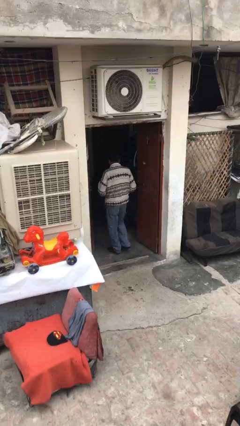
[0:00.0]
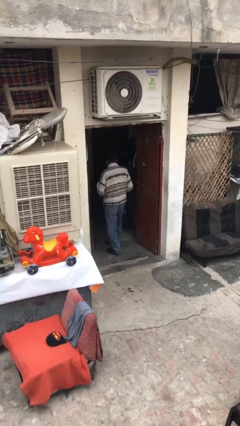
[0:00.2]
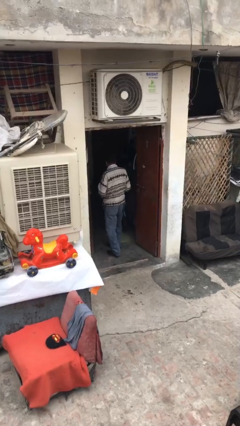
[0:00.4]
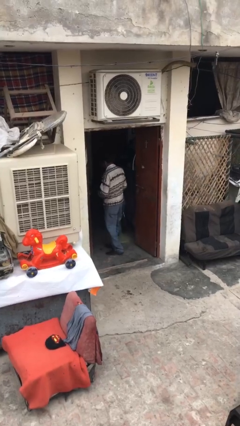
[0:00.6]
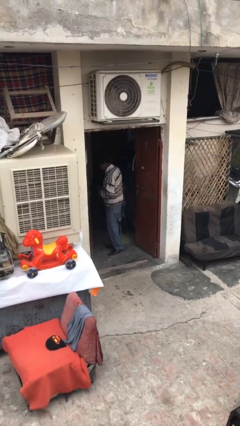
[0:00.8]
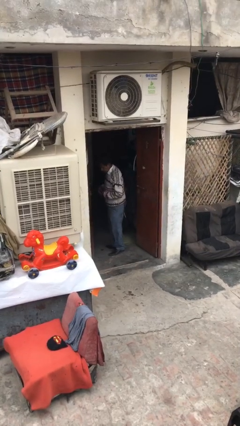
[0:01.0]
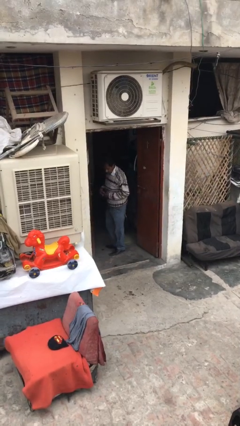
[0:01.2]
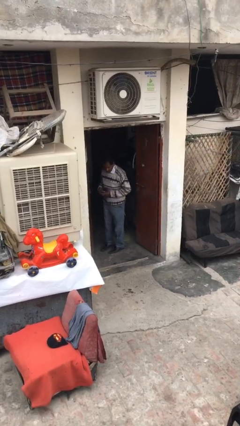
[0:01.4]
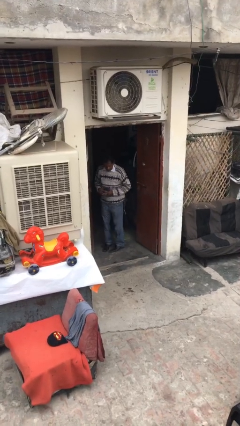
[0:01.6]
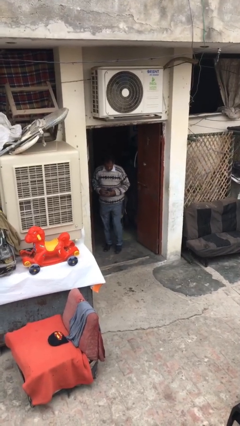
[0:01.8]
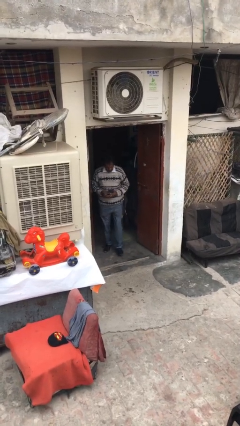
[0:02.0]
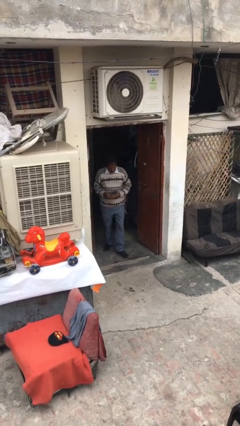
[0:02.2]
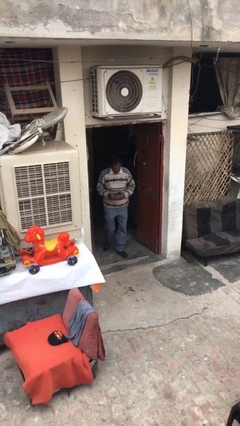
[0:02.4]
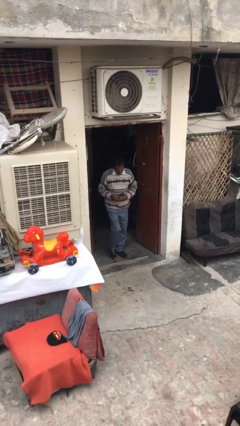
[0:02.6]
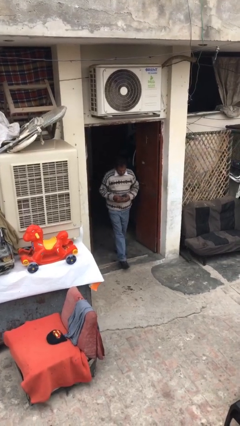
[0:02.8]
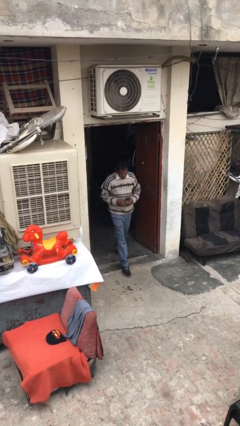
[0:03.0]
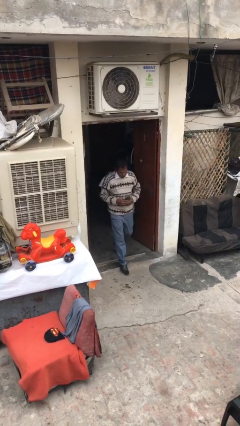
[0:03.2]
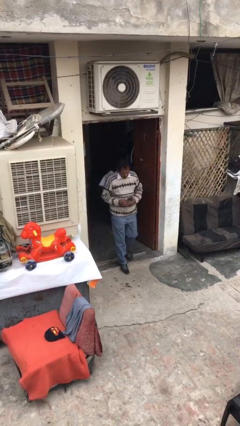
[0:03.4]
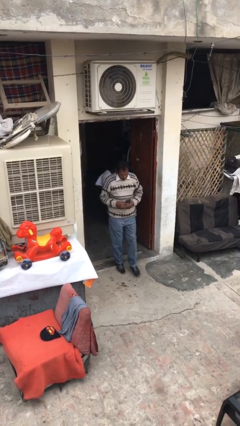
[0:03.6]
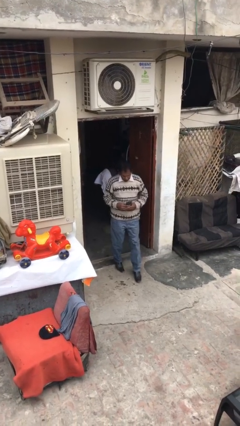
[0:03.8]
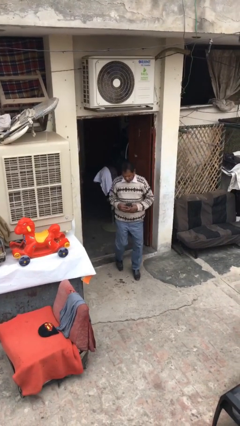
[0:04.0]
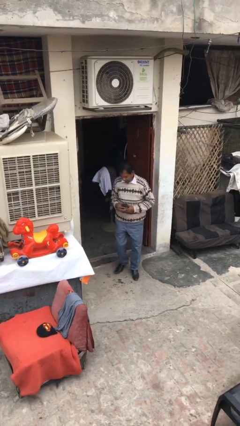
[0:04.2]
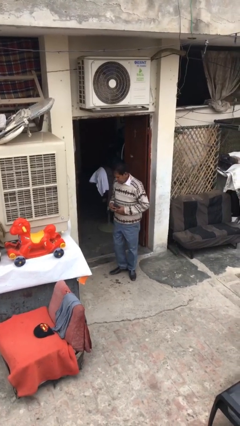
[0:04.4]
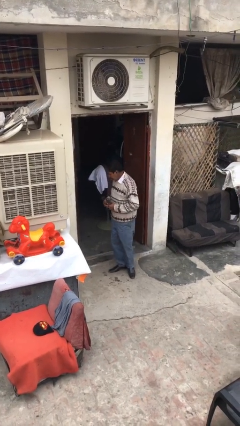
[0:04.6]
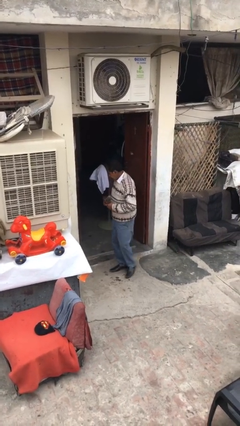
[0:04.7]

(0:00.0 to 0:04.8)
person enters scene through structure

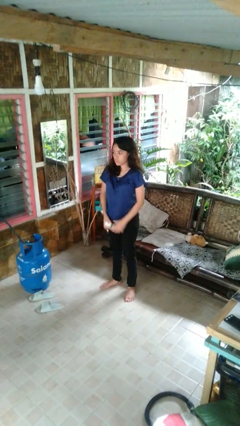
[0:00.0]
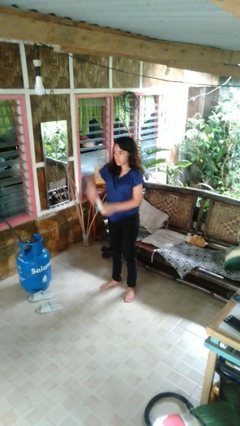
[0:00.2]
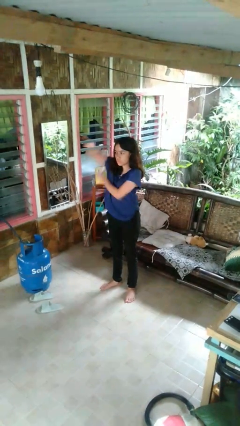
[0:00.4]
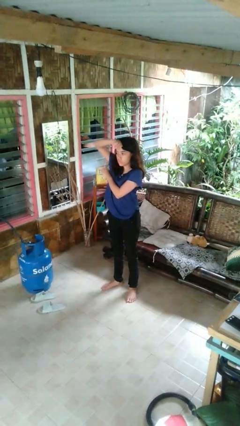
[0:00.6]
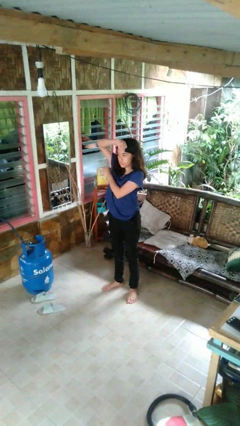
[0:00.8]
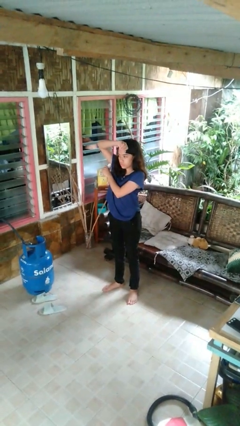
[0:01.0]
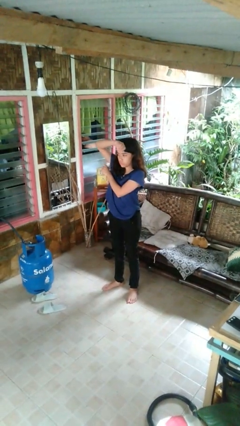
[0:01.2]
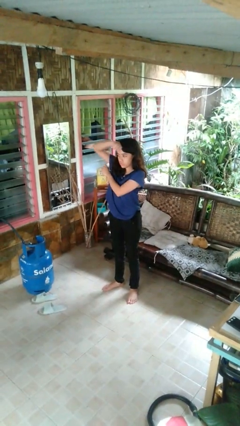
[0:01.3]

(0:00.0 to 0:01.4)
person applies deodorant

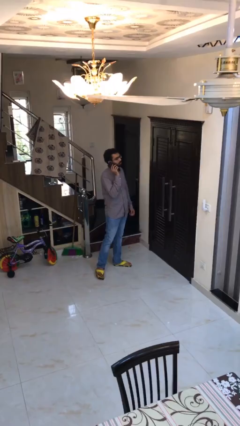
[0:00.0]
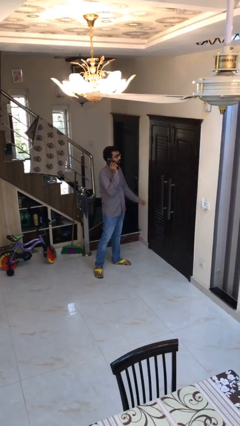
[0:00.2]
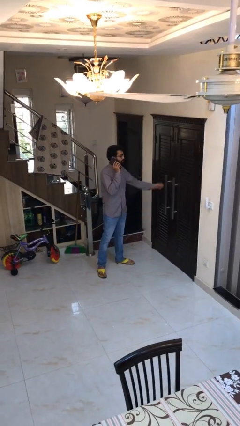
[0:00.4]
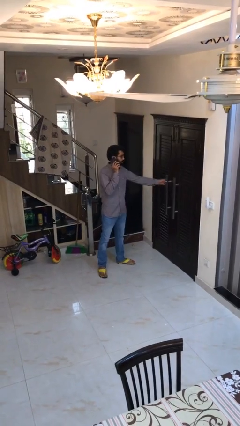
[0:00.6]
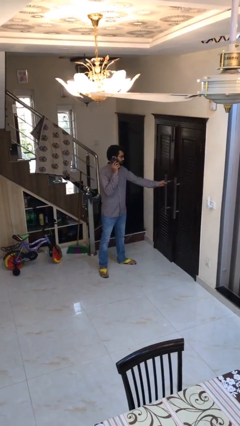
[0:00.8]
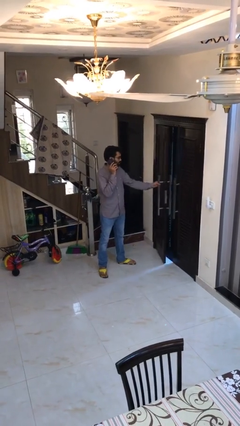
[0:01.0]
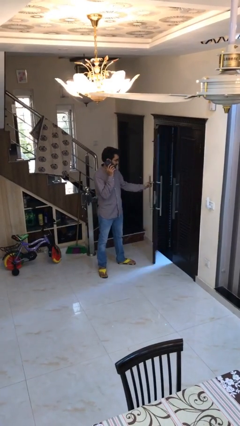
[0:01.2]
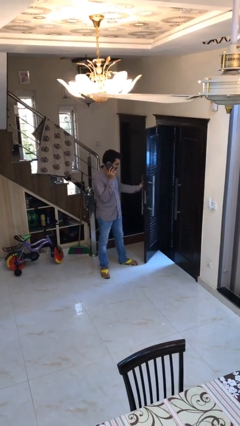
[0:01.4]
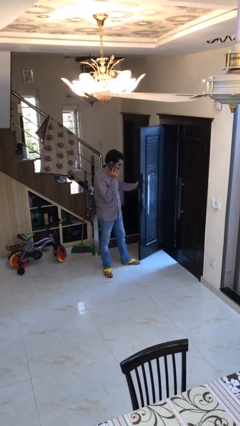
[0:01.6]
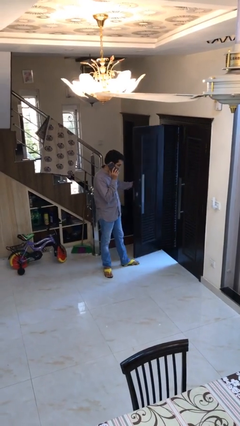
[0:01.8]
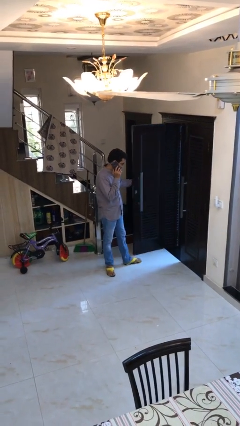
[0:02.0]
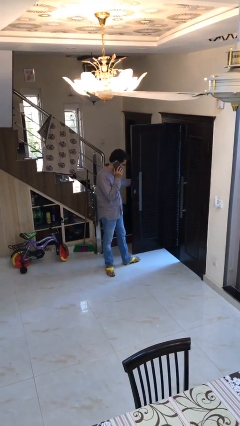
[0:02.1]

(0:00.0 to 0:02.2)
person opens facility door

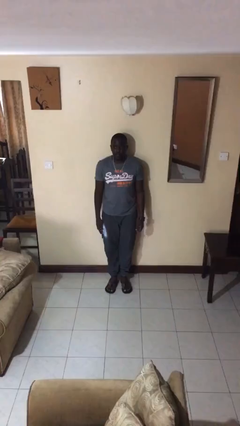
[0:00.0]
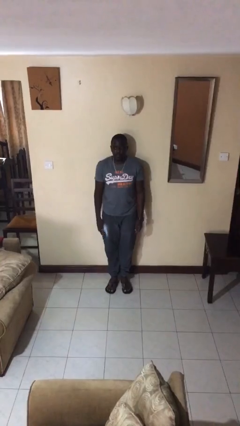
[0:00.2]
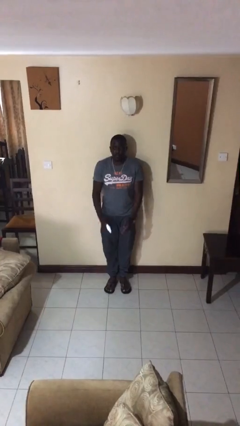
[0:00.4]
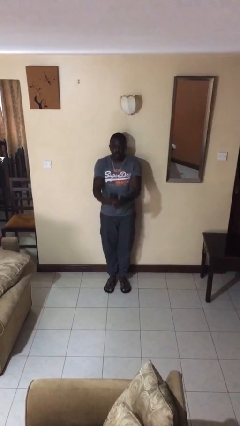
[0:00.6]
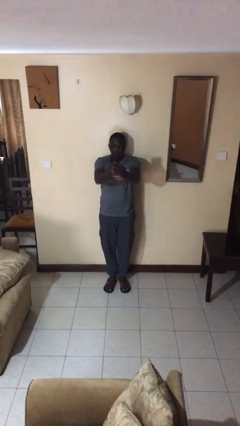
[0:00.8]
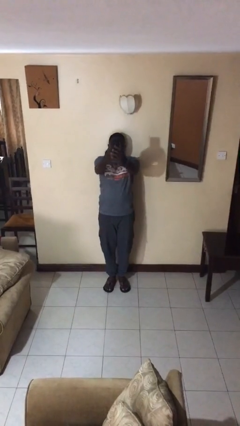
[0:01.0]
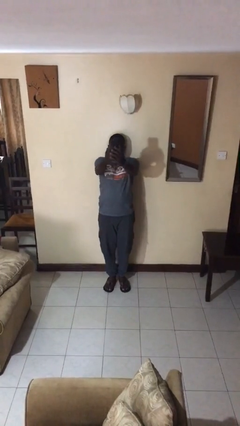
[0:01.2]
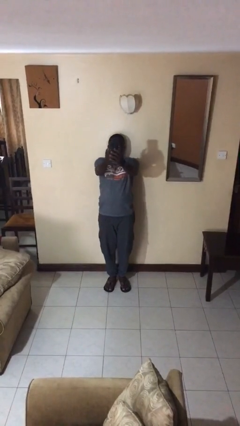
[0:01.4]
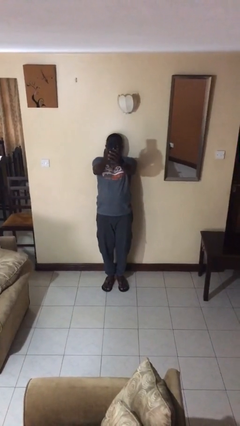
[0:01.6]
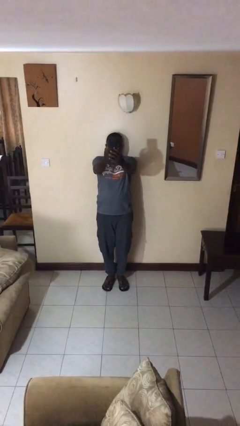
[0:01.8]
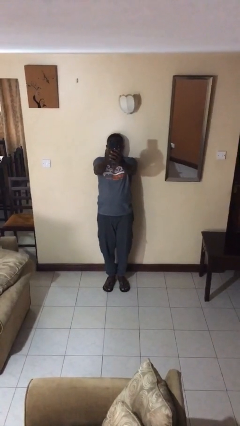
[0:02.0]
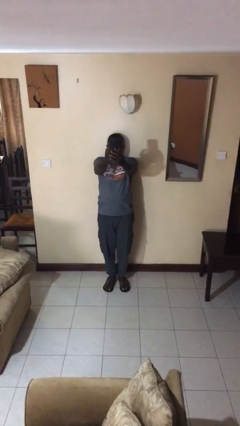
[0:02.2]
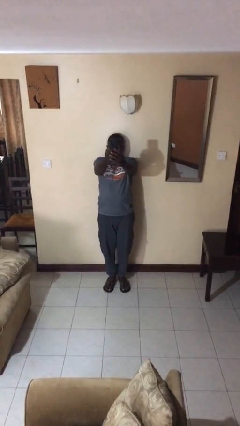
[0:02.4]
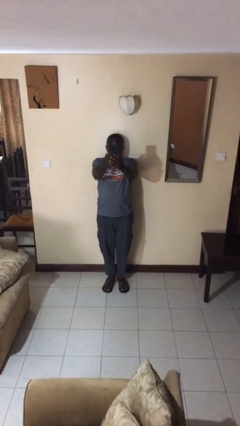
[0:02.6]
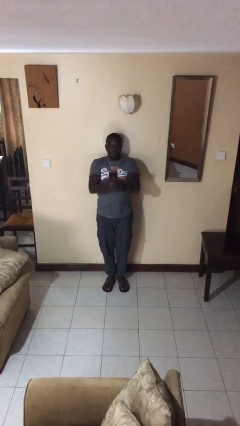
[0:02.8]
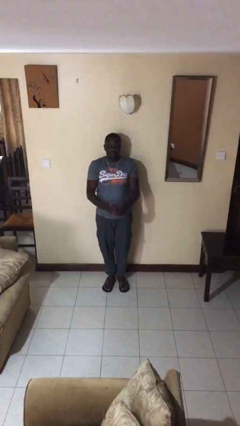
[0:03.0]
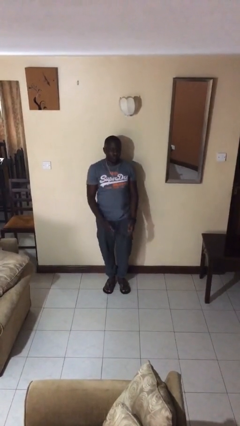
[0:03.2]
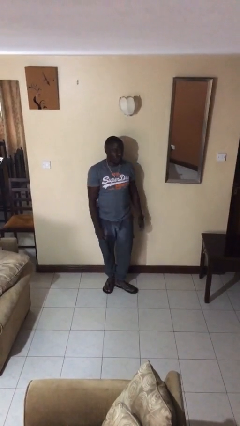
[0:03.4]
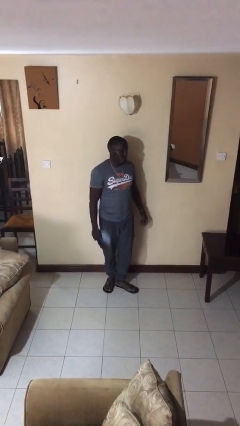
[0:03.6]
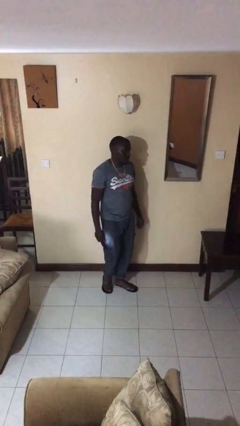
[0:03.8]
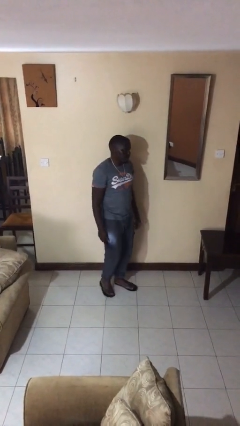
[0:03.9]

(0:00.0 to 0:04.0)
person takes selfie

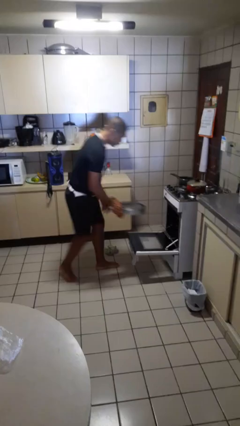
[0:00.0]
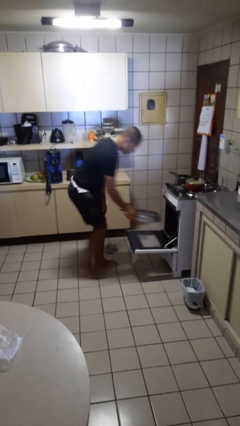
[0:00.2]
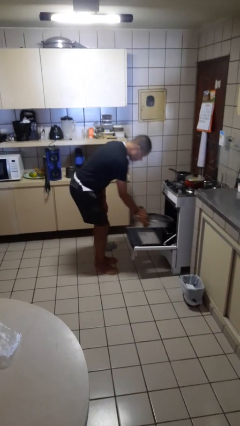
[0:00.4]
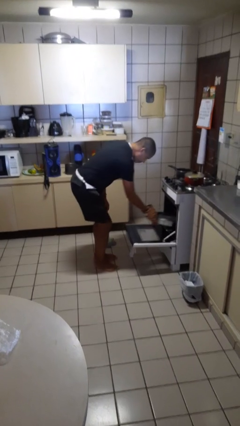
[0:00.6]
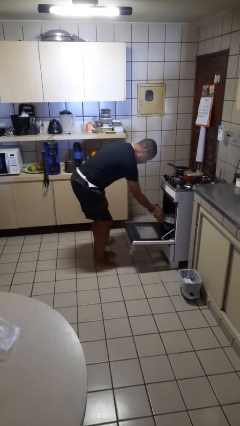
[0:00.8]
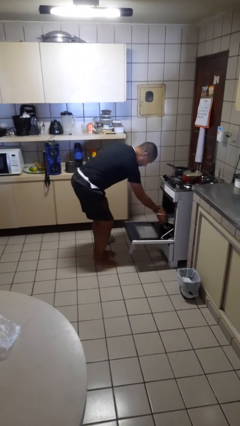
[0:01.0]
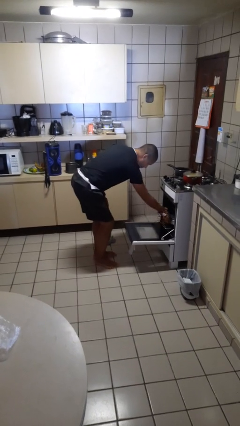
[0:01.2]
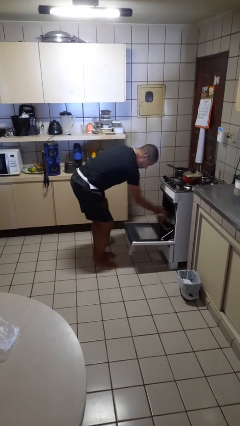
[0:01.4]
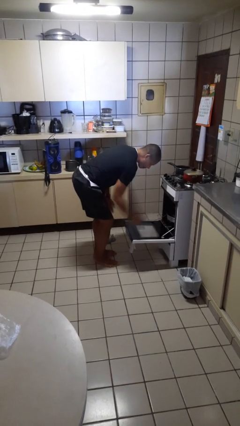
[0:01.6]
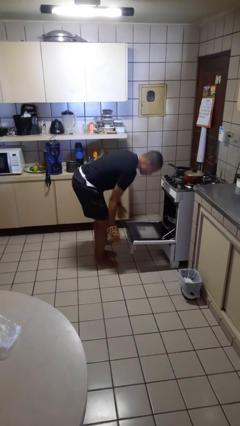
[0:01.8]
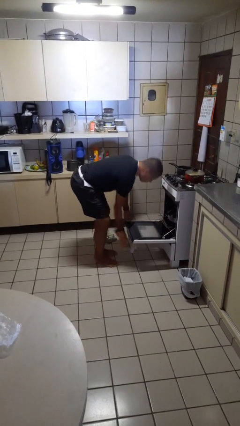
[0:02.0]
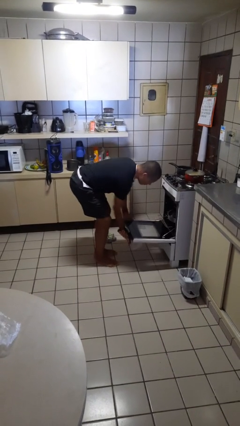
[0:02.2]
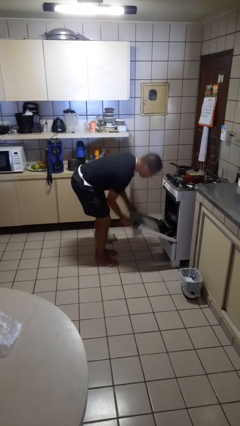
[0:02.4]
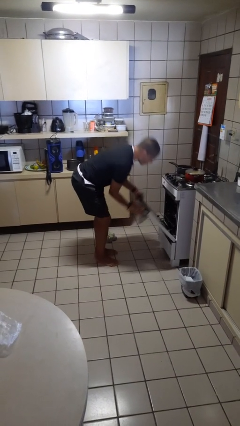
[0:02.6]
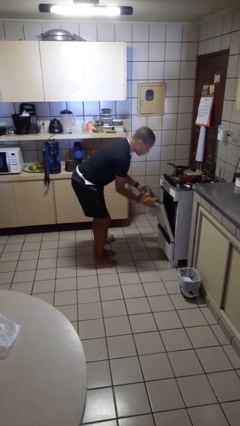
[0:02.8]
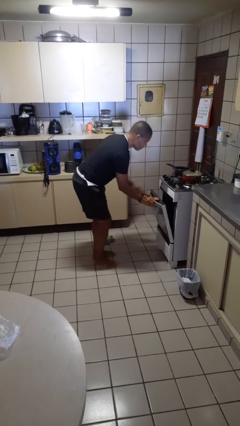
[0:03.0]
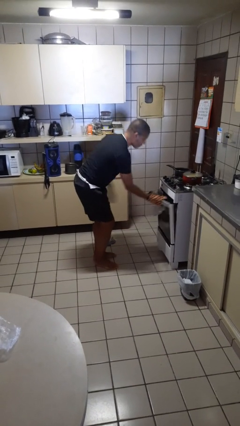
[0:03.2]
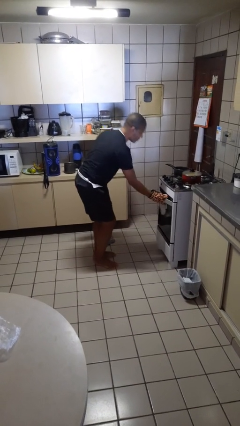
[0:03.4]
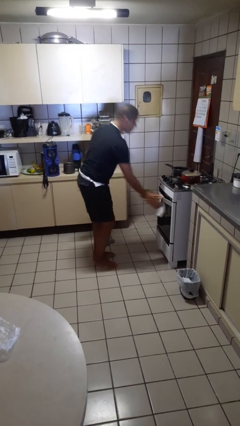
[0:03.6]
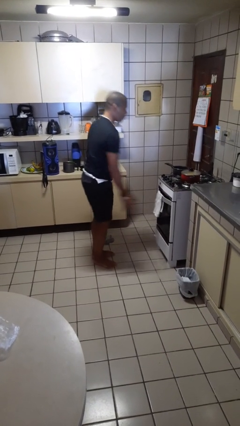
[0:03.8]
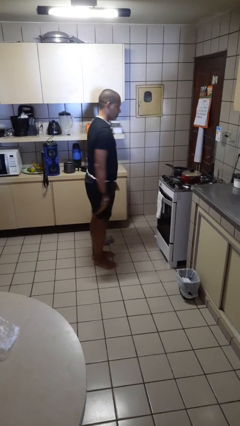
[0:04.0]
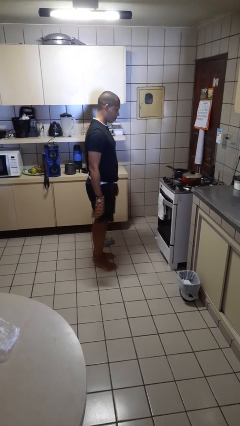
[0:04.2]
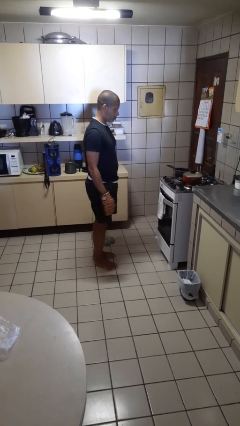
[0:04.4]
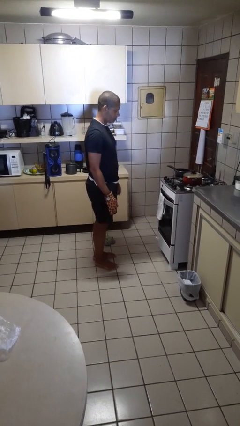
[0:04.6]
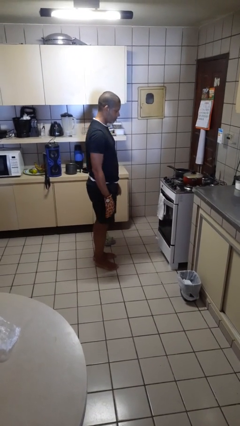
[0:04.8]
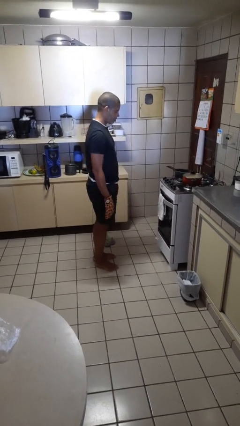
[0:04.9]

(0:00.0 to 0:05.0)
person puts object into oven

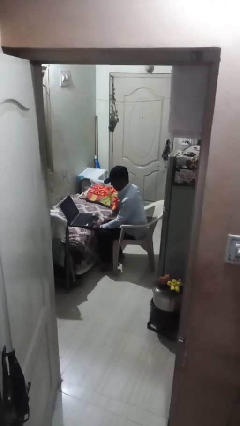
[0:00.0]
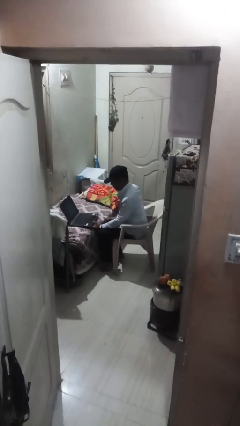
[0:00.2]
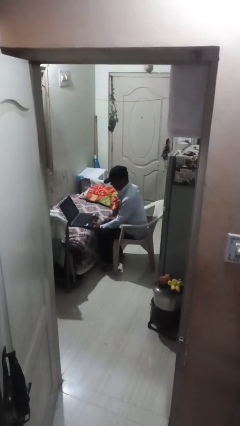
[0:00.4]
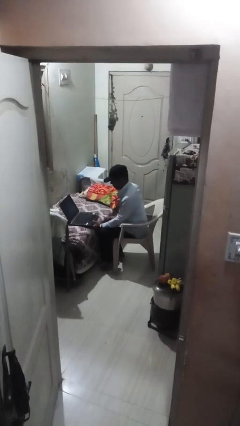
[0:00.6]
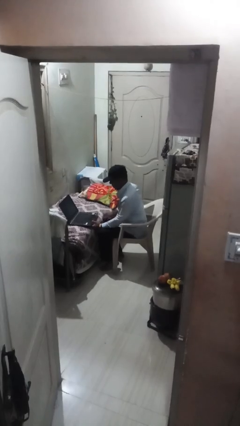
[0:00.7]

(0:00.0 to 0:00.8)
person closes laptop
